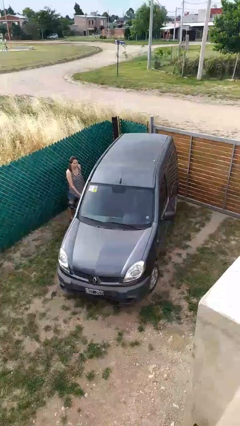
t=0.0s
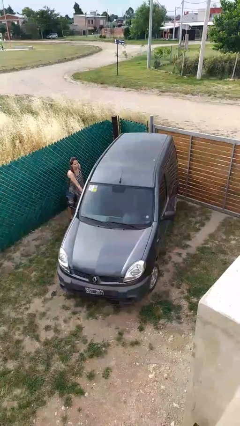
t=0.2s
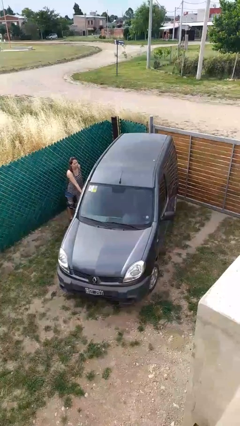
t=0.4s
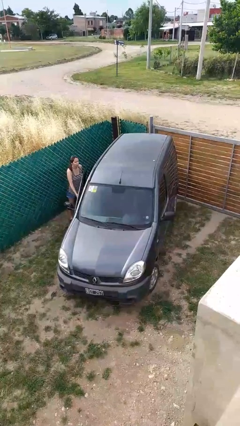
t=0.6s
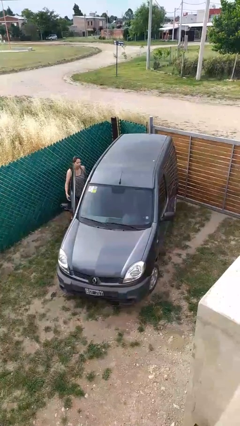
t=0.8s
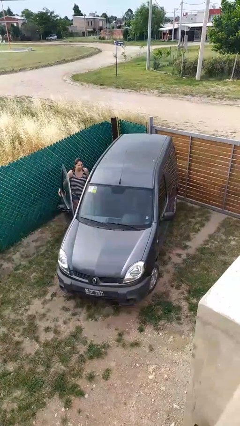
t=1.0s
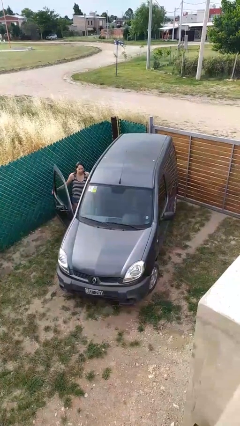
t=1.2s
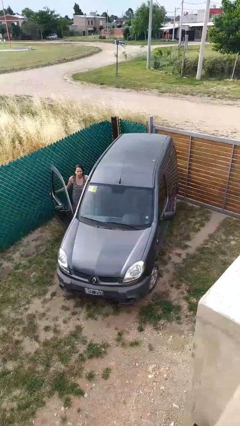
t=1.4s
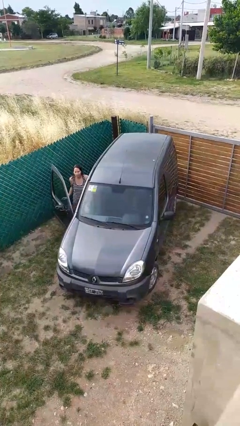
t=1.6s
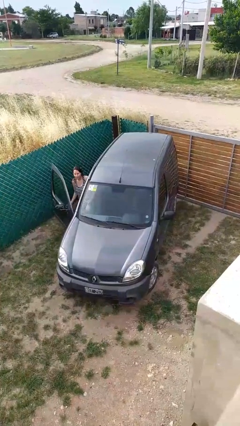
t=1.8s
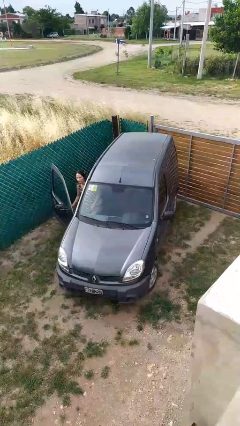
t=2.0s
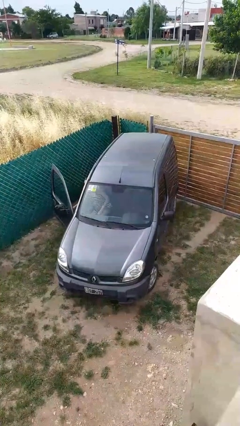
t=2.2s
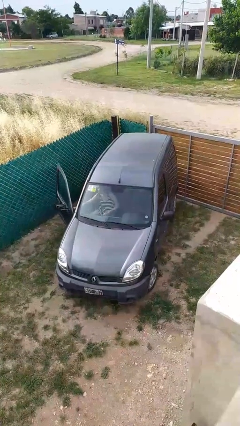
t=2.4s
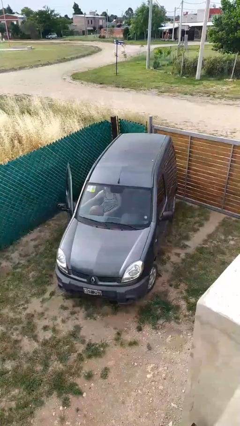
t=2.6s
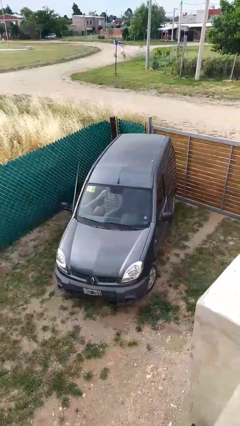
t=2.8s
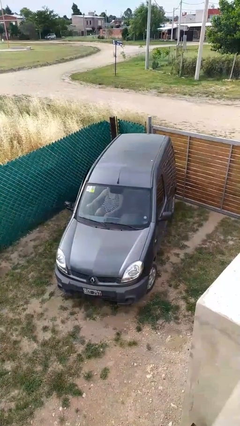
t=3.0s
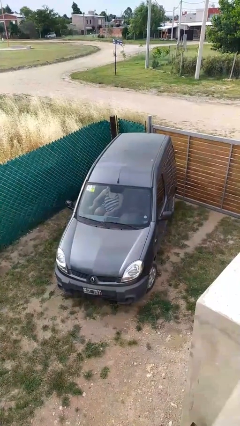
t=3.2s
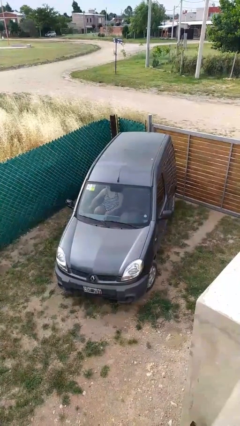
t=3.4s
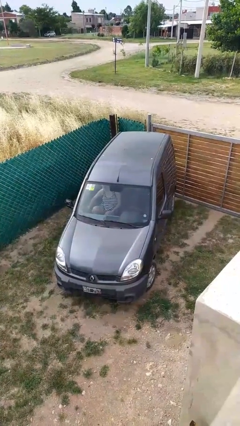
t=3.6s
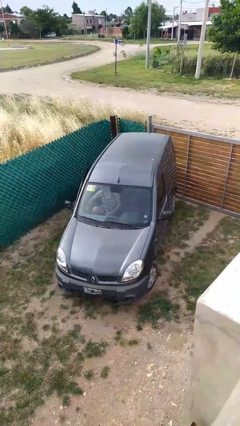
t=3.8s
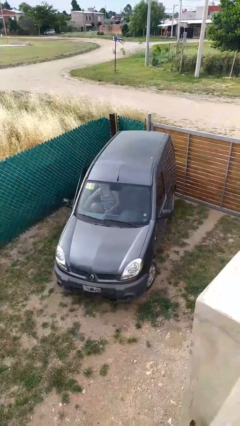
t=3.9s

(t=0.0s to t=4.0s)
car picks up person

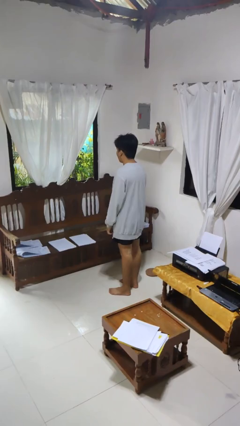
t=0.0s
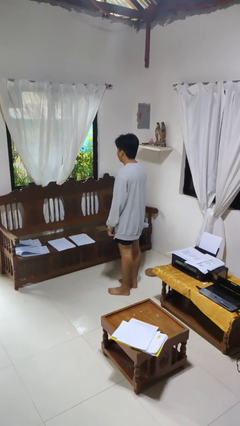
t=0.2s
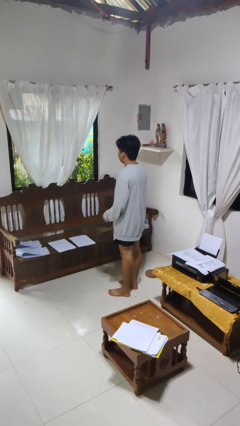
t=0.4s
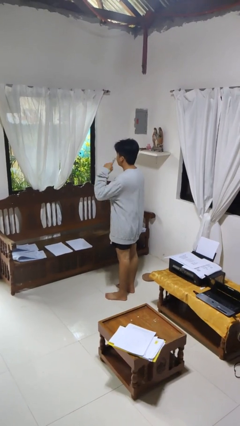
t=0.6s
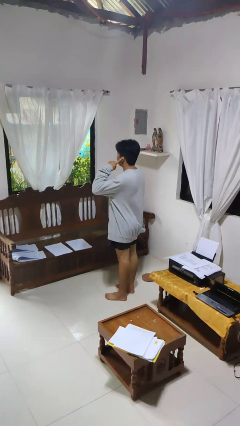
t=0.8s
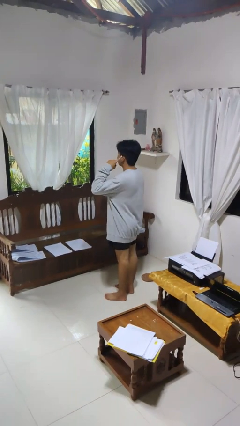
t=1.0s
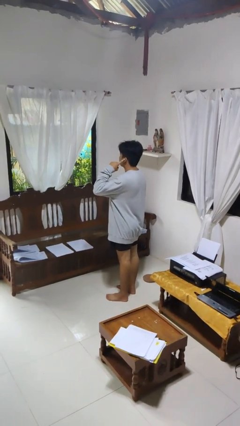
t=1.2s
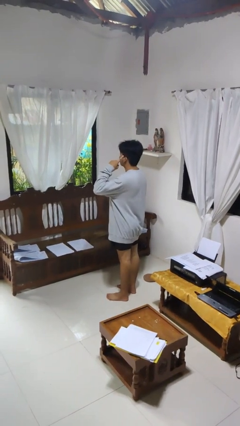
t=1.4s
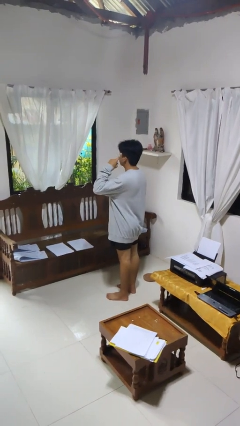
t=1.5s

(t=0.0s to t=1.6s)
person gestures listen closely

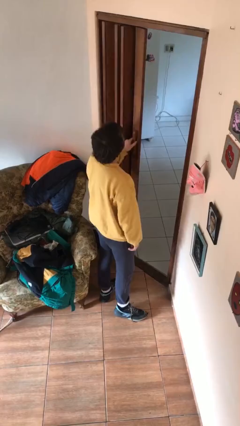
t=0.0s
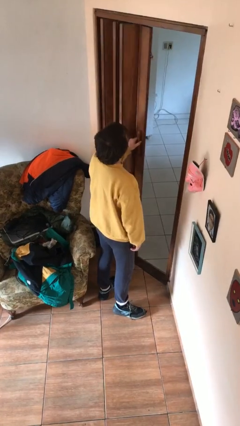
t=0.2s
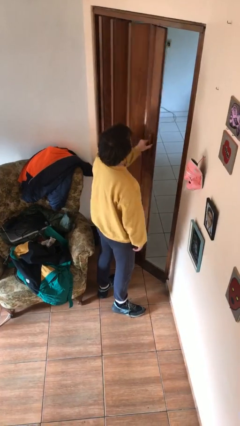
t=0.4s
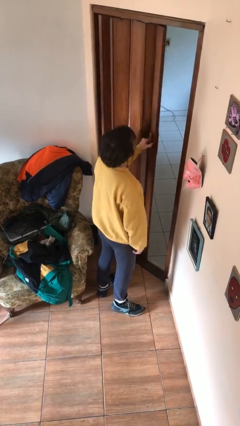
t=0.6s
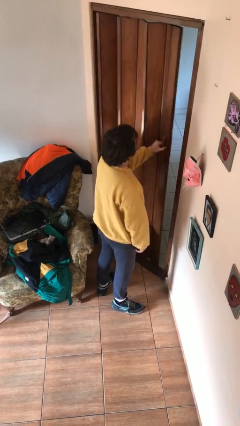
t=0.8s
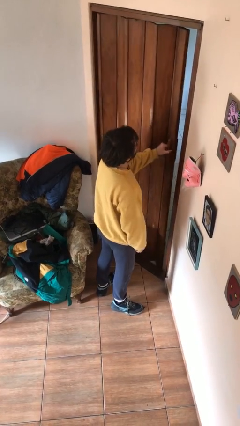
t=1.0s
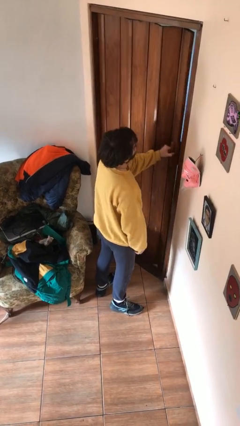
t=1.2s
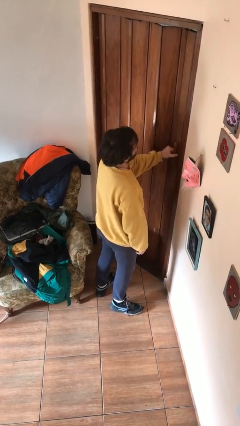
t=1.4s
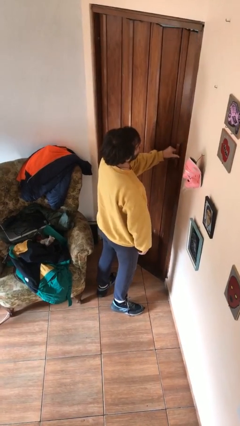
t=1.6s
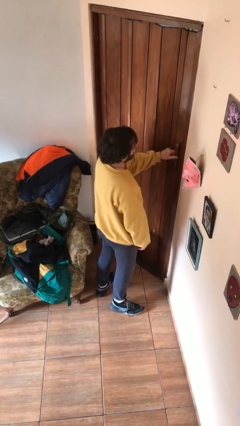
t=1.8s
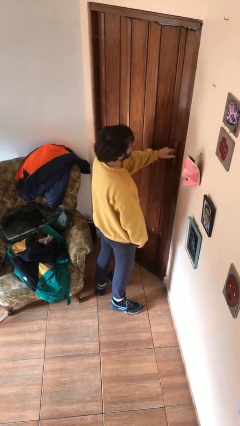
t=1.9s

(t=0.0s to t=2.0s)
person closes sliding door

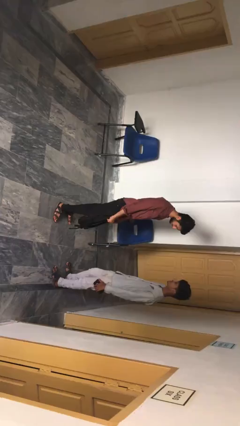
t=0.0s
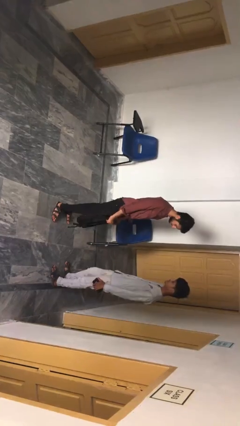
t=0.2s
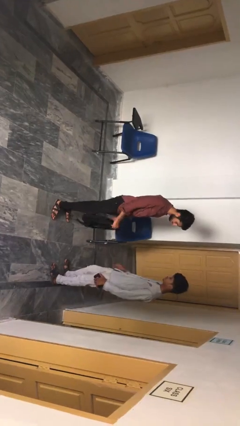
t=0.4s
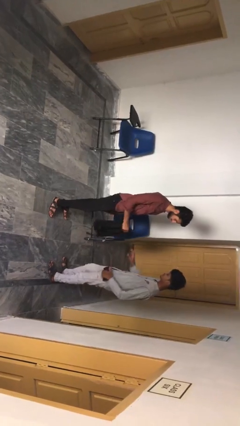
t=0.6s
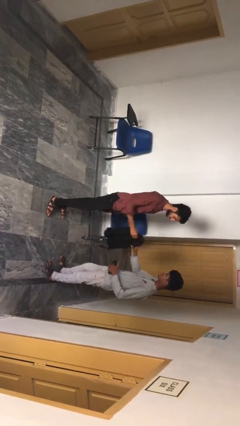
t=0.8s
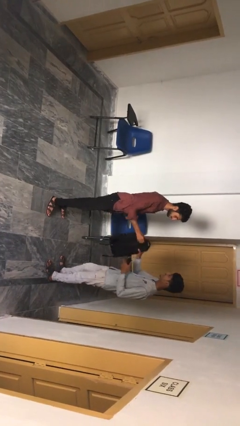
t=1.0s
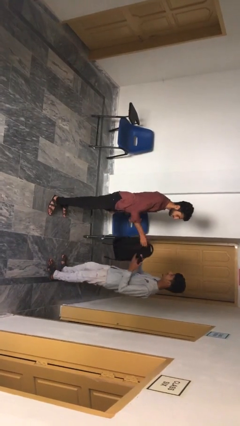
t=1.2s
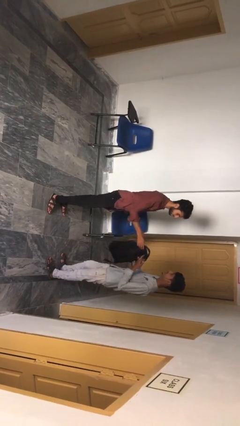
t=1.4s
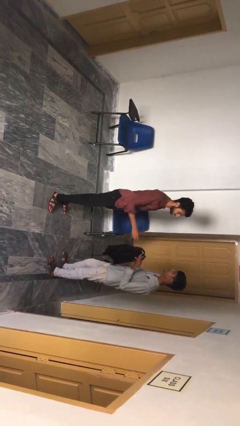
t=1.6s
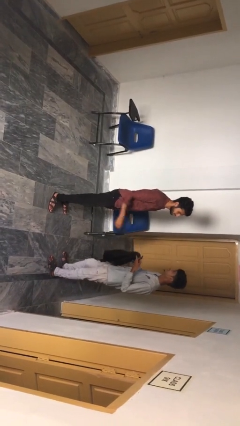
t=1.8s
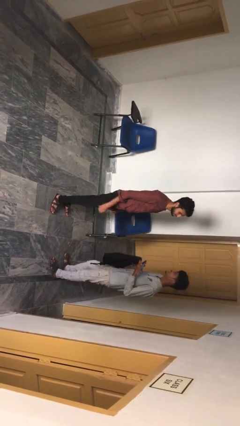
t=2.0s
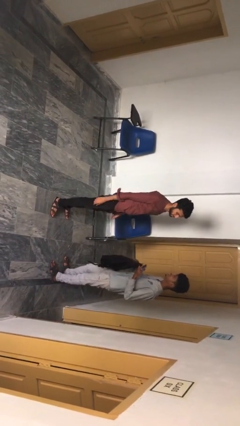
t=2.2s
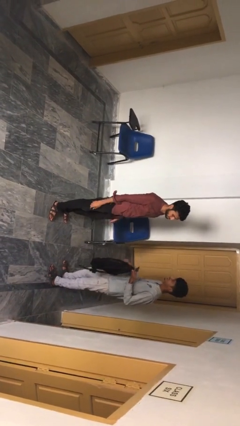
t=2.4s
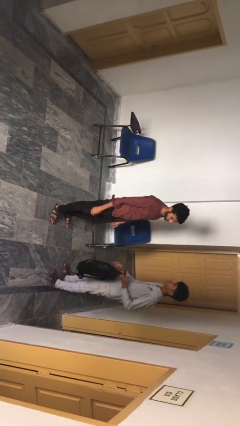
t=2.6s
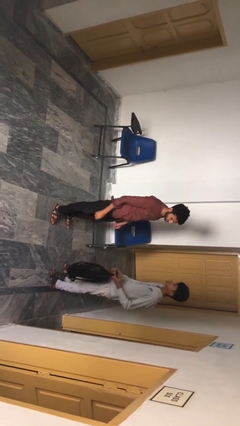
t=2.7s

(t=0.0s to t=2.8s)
person transfers object to person

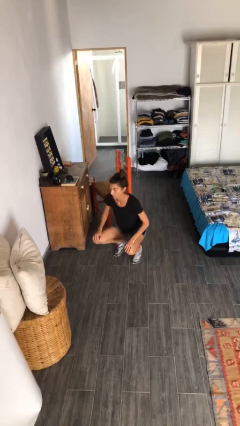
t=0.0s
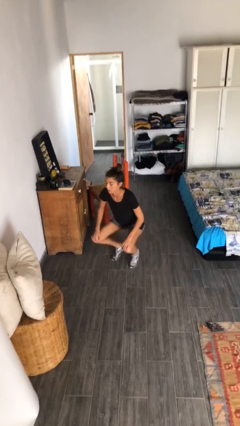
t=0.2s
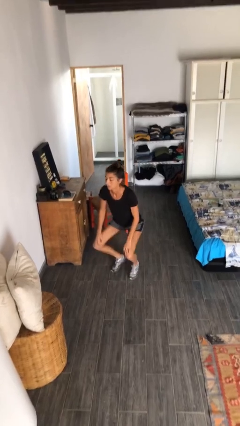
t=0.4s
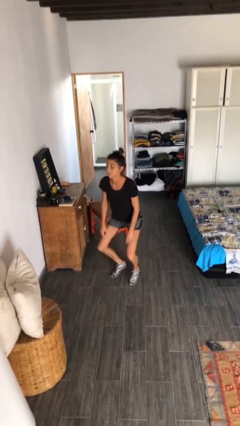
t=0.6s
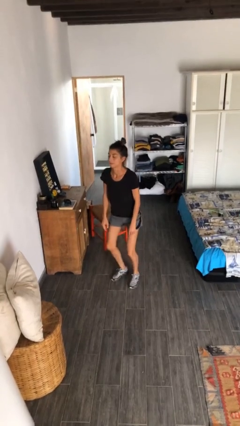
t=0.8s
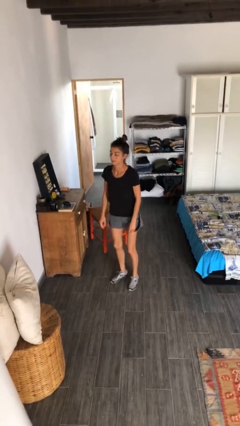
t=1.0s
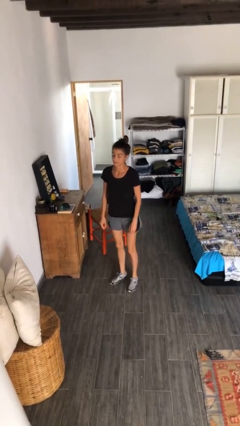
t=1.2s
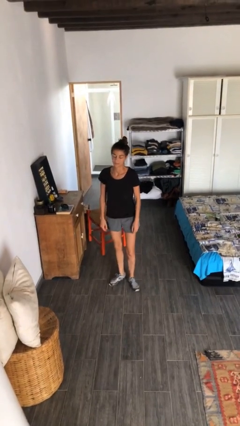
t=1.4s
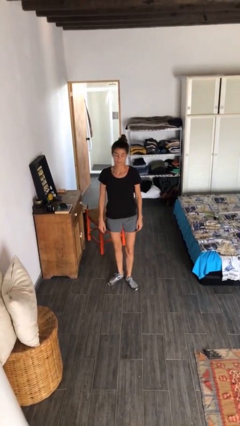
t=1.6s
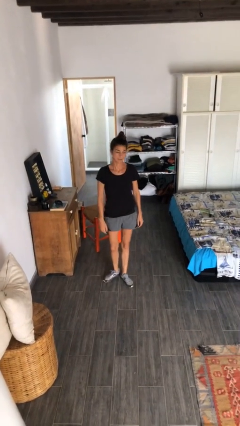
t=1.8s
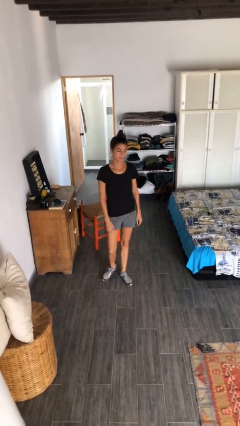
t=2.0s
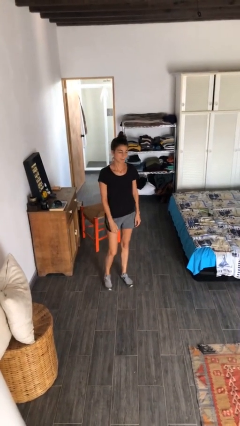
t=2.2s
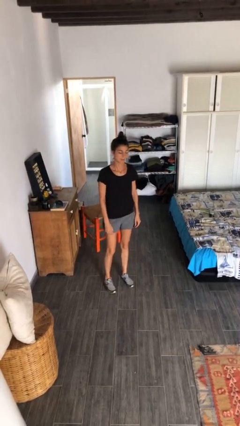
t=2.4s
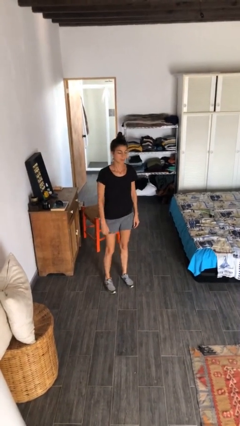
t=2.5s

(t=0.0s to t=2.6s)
person stands up

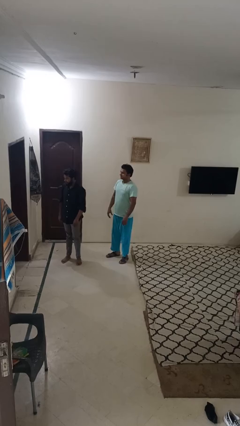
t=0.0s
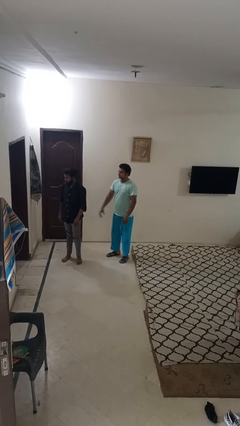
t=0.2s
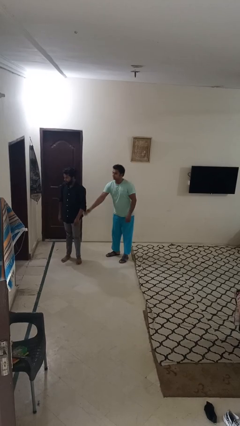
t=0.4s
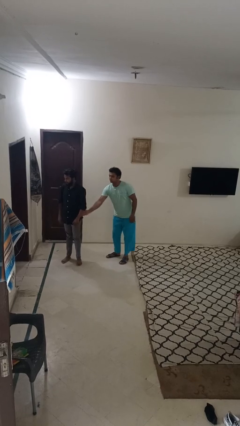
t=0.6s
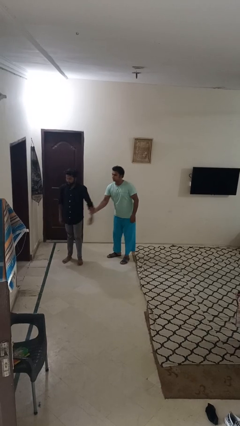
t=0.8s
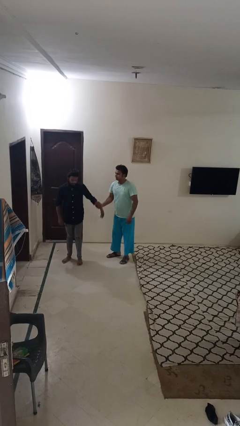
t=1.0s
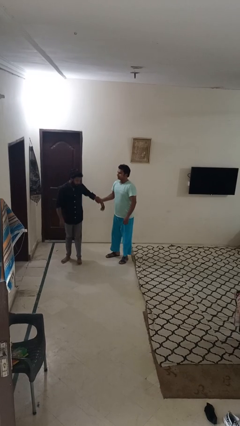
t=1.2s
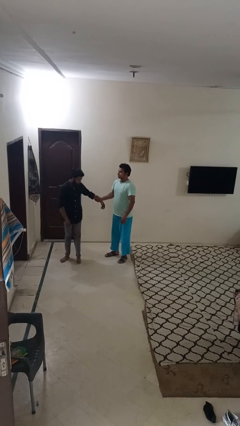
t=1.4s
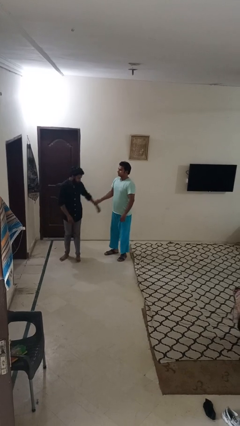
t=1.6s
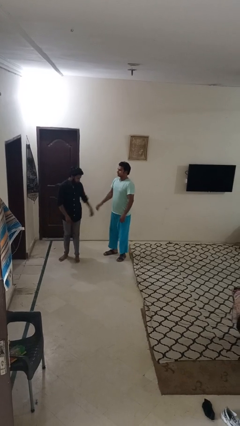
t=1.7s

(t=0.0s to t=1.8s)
person grabs person by forearm

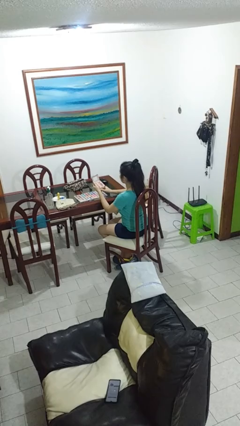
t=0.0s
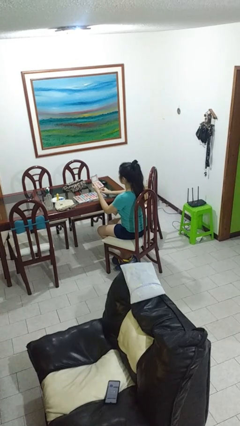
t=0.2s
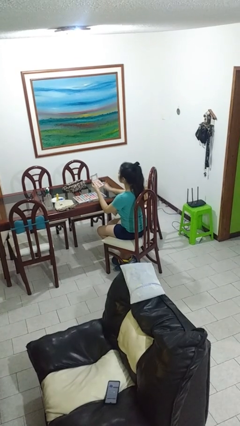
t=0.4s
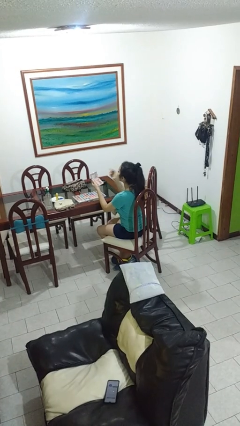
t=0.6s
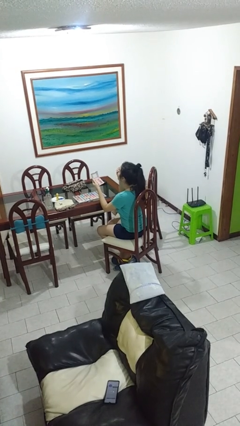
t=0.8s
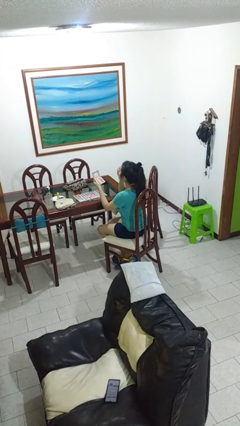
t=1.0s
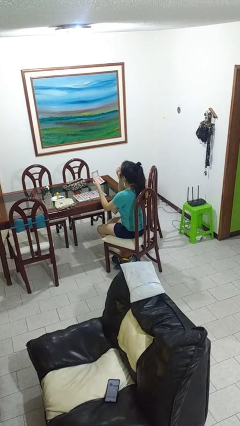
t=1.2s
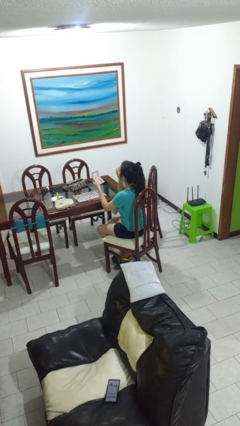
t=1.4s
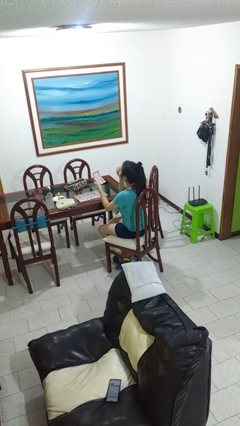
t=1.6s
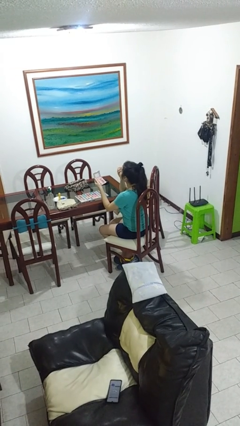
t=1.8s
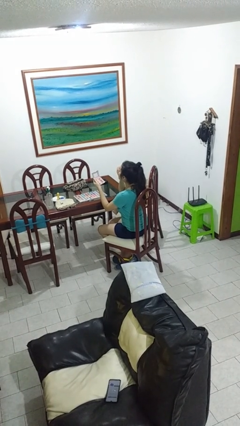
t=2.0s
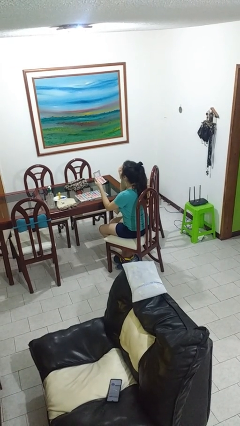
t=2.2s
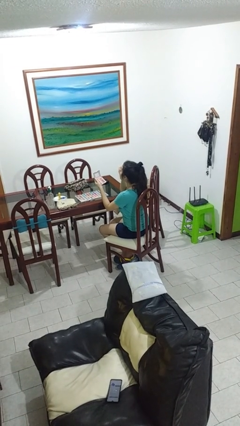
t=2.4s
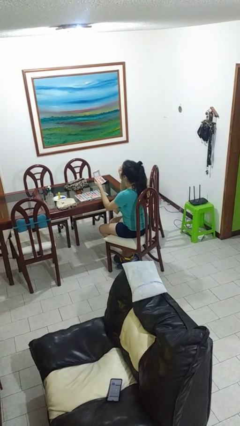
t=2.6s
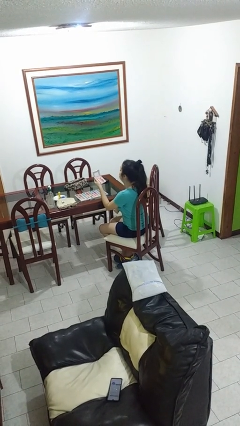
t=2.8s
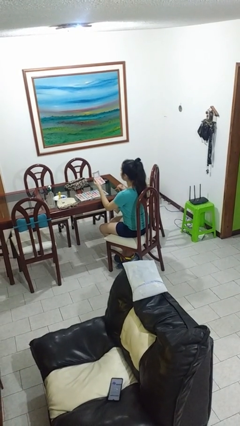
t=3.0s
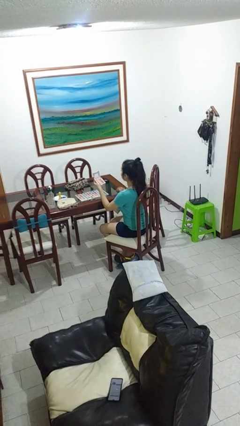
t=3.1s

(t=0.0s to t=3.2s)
person applies eye makeup
